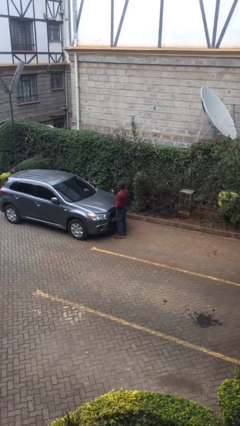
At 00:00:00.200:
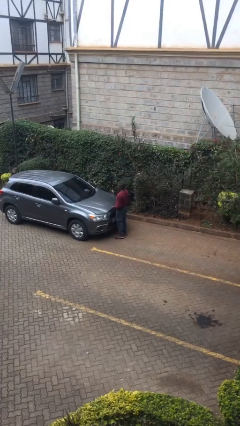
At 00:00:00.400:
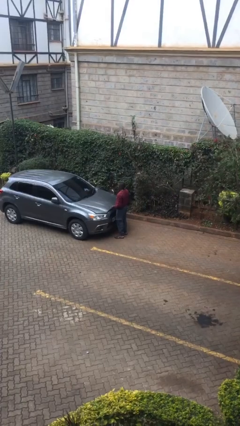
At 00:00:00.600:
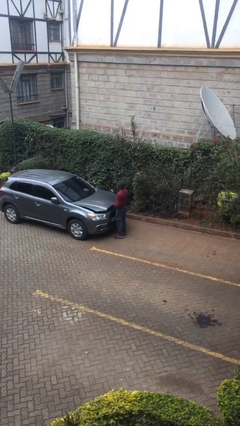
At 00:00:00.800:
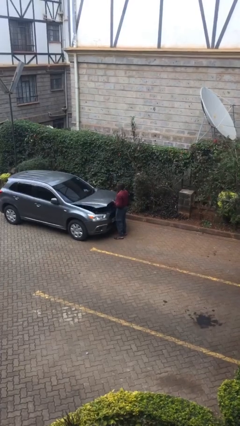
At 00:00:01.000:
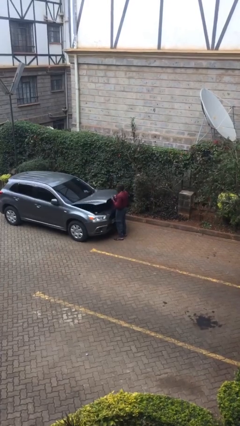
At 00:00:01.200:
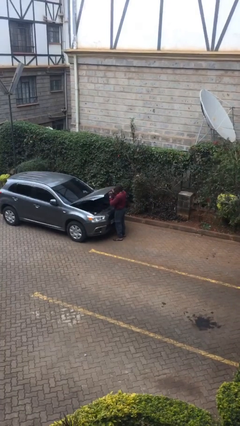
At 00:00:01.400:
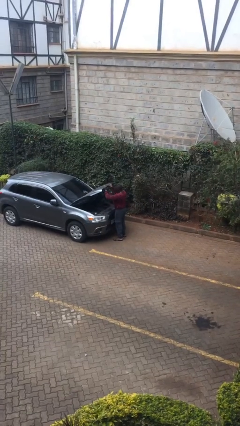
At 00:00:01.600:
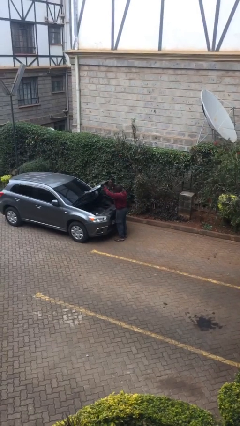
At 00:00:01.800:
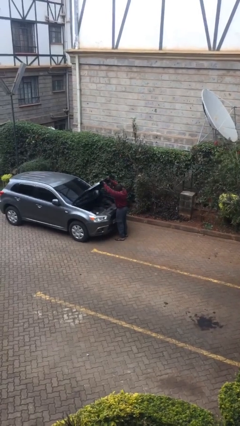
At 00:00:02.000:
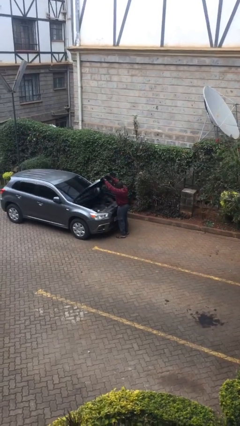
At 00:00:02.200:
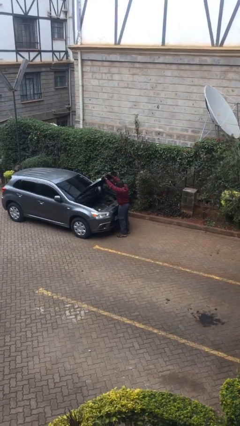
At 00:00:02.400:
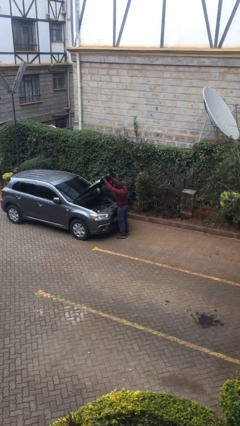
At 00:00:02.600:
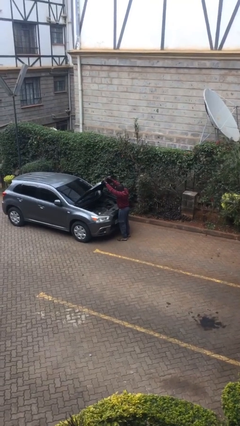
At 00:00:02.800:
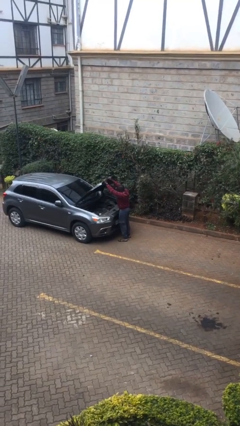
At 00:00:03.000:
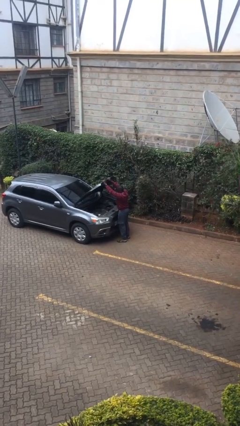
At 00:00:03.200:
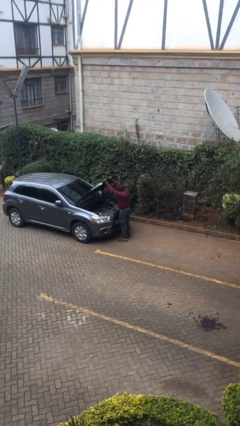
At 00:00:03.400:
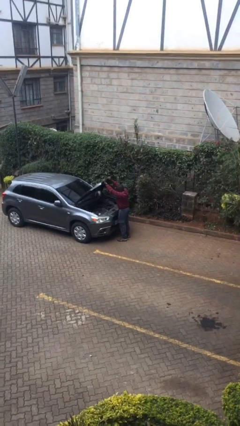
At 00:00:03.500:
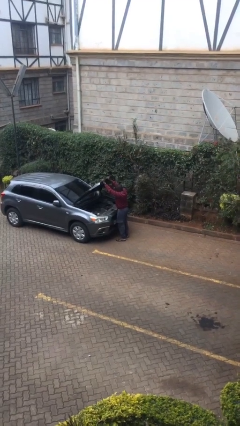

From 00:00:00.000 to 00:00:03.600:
person opens car hood

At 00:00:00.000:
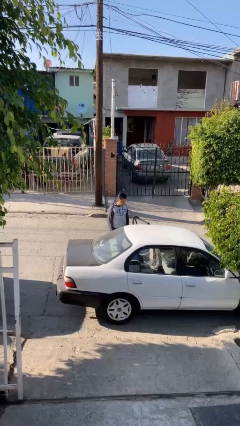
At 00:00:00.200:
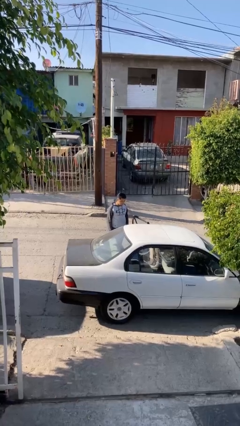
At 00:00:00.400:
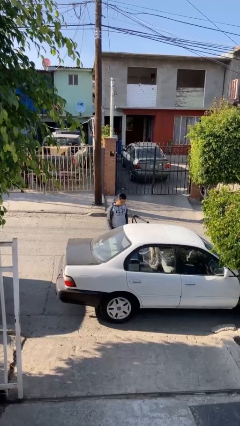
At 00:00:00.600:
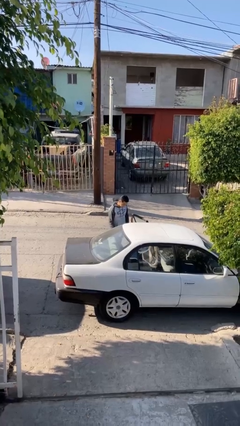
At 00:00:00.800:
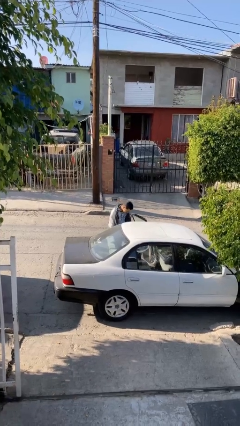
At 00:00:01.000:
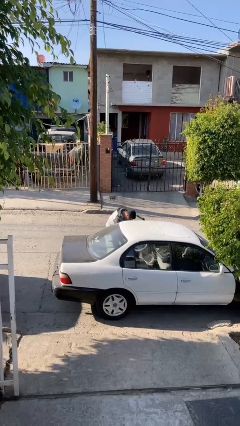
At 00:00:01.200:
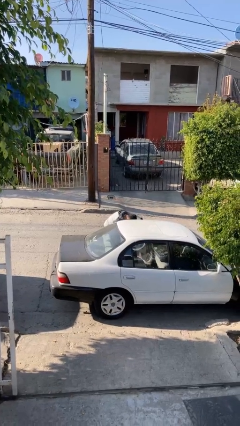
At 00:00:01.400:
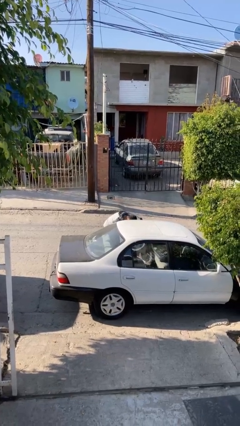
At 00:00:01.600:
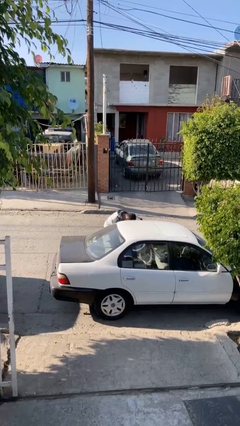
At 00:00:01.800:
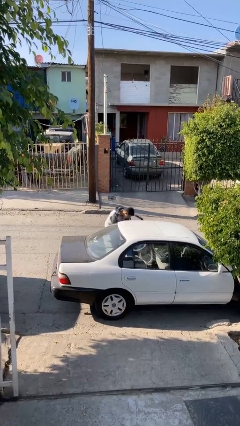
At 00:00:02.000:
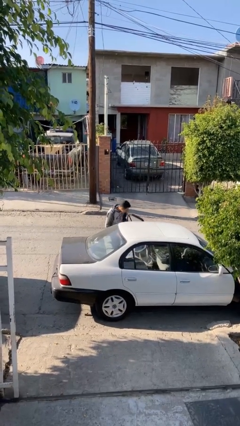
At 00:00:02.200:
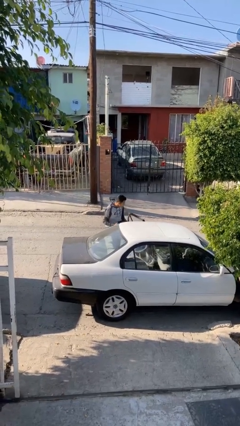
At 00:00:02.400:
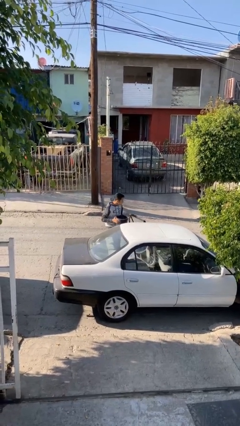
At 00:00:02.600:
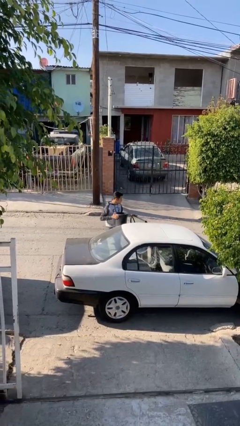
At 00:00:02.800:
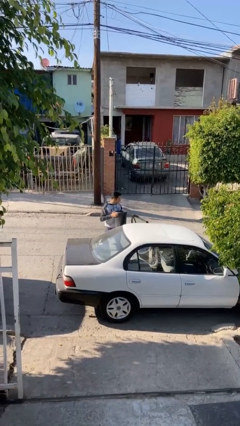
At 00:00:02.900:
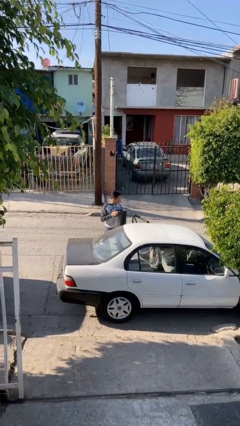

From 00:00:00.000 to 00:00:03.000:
person unloads car

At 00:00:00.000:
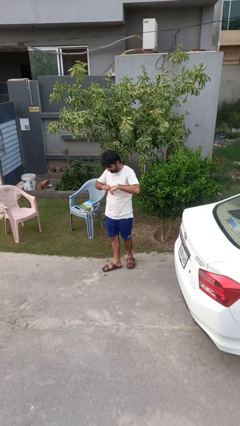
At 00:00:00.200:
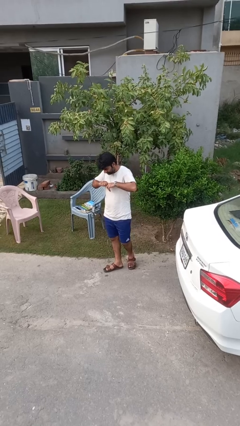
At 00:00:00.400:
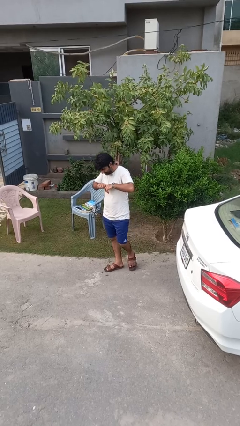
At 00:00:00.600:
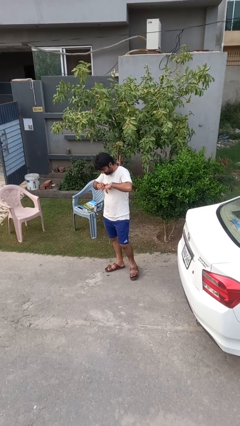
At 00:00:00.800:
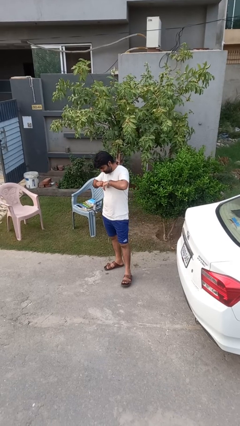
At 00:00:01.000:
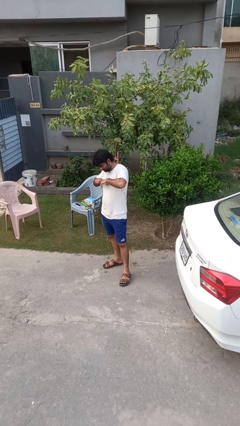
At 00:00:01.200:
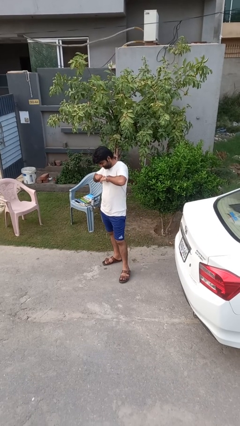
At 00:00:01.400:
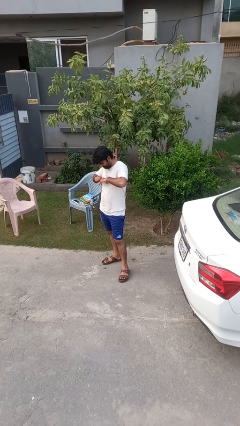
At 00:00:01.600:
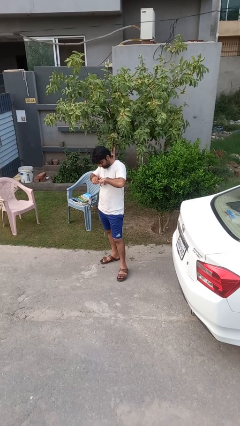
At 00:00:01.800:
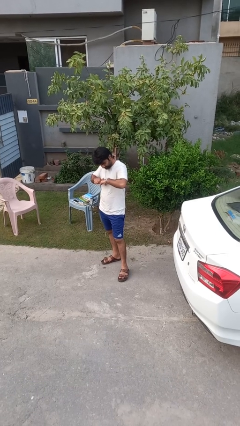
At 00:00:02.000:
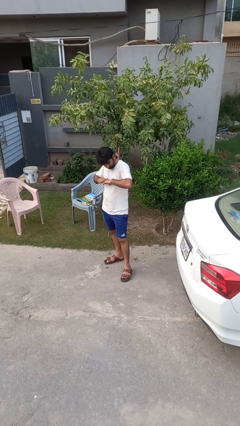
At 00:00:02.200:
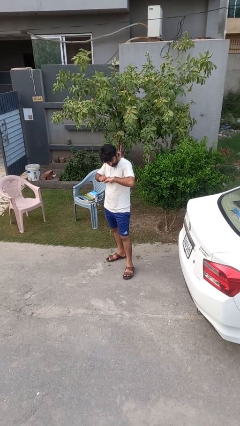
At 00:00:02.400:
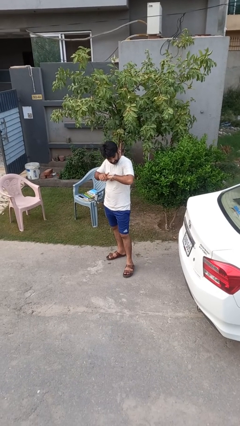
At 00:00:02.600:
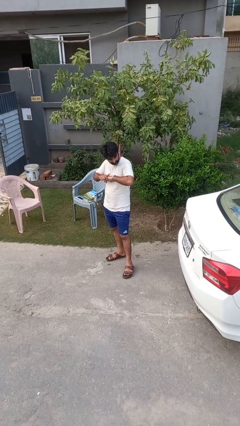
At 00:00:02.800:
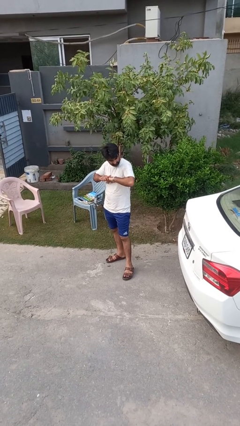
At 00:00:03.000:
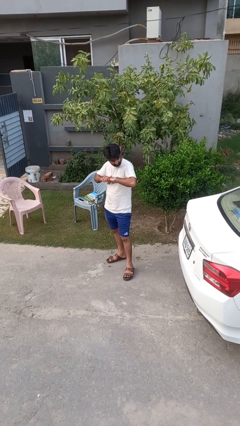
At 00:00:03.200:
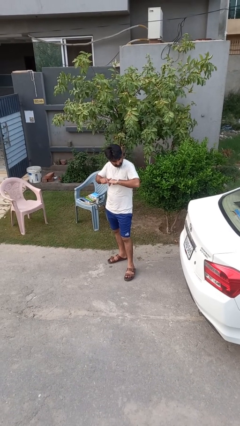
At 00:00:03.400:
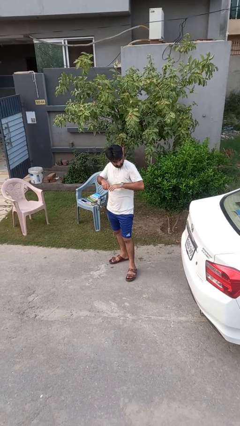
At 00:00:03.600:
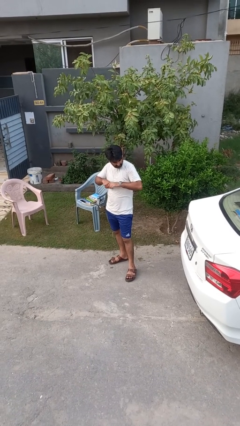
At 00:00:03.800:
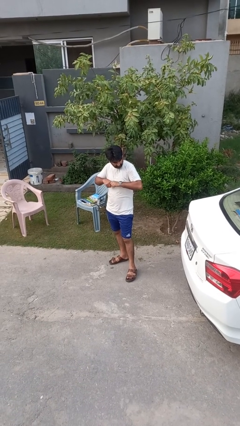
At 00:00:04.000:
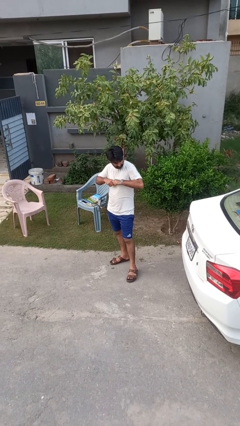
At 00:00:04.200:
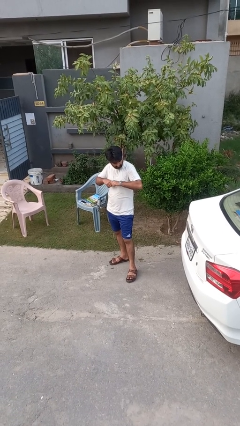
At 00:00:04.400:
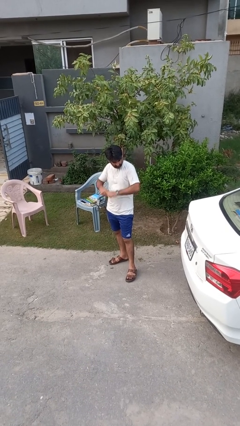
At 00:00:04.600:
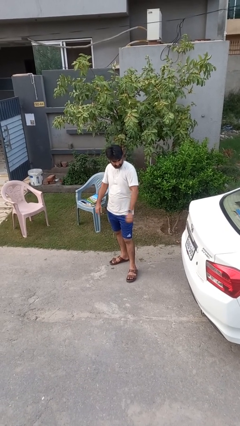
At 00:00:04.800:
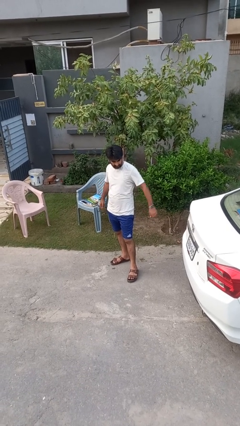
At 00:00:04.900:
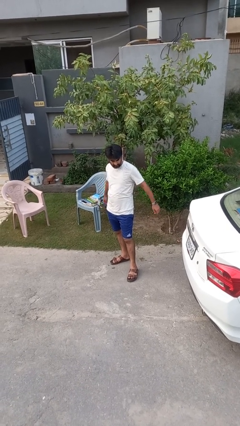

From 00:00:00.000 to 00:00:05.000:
person cracks knuckles
